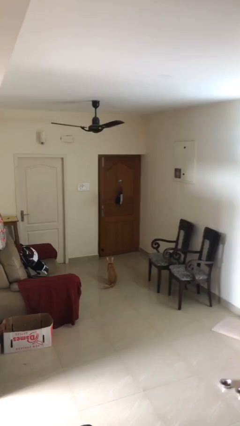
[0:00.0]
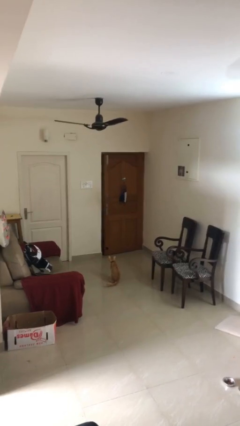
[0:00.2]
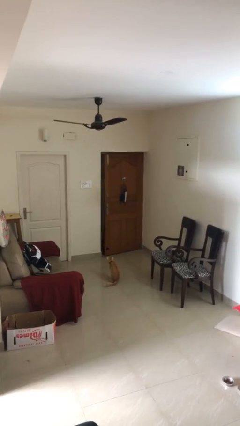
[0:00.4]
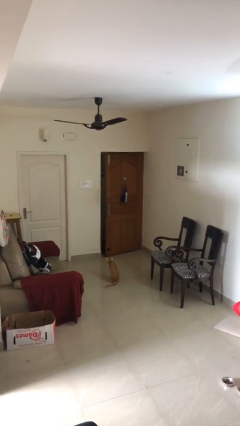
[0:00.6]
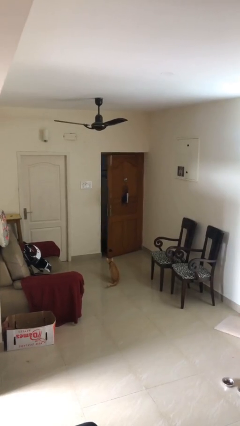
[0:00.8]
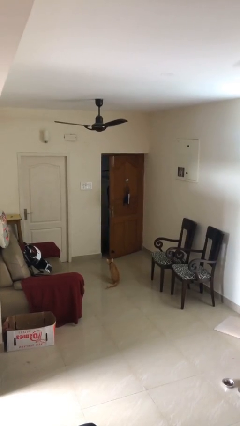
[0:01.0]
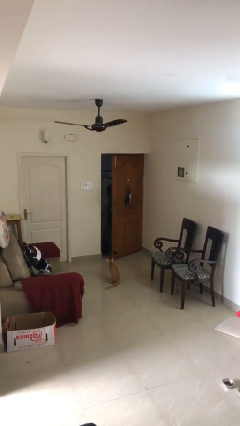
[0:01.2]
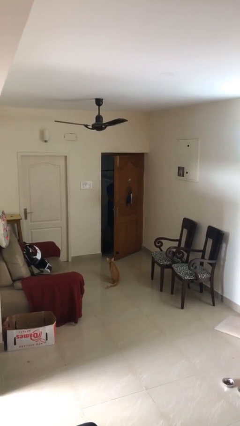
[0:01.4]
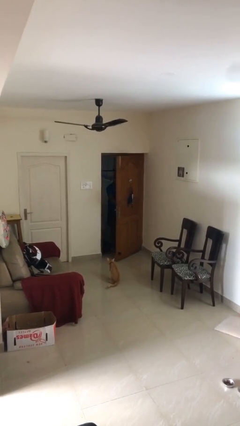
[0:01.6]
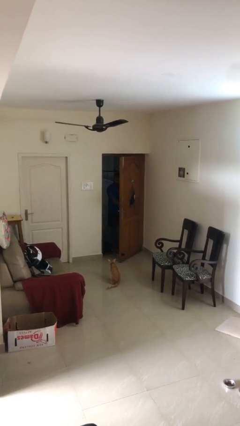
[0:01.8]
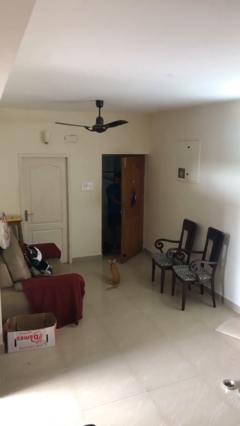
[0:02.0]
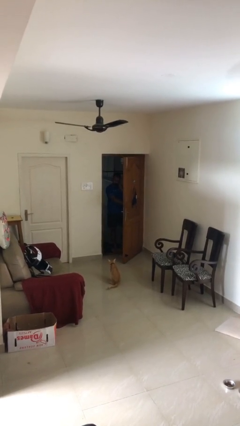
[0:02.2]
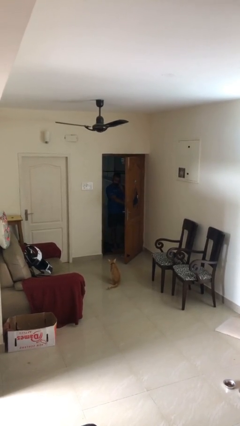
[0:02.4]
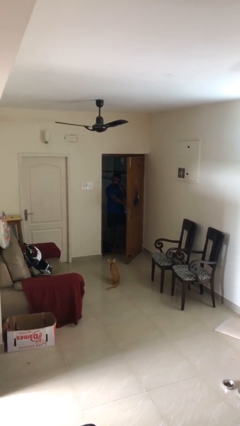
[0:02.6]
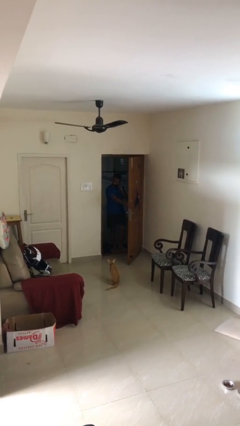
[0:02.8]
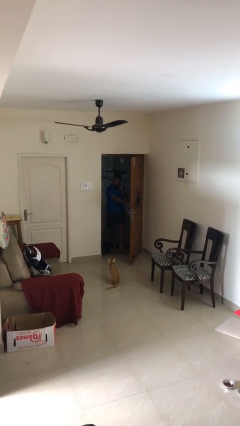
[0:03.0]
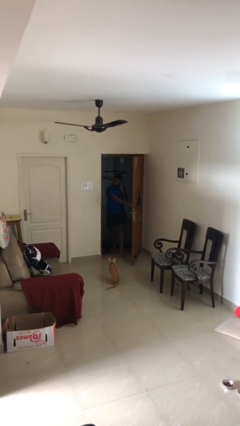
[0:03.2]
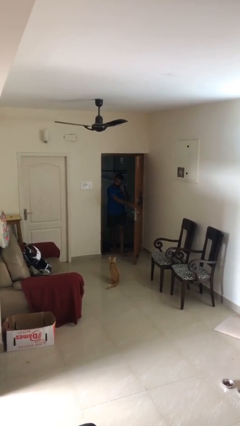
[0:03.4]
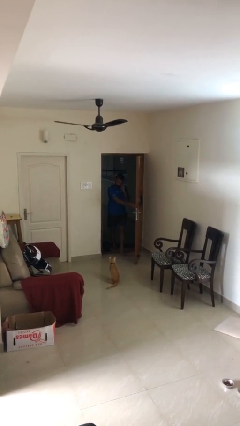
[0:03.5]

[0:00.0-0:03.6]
person opens facility door

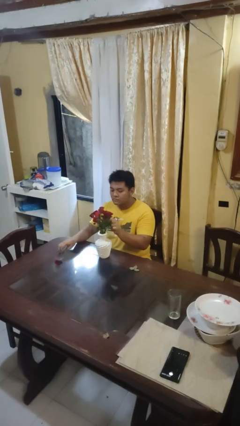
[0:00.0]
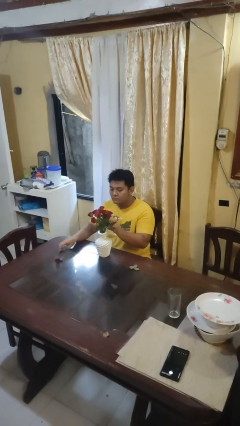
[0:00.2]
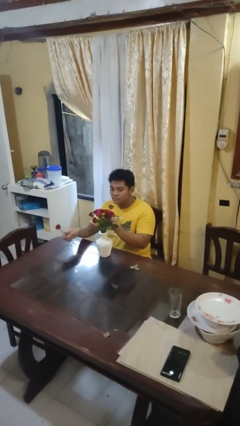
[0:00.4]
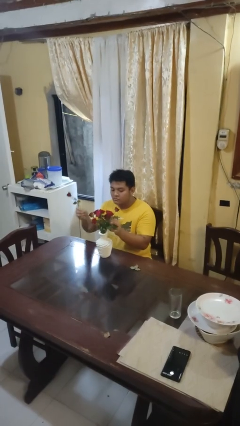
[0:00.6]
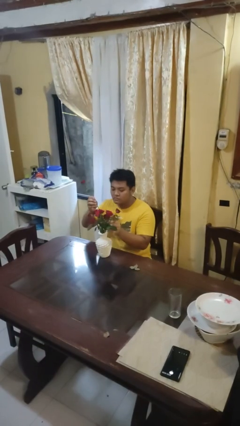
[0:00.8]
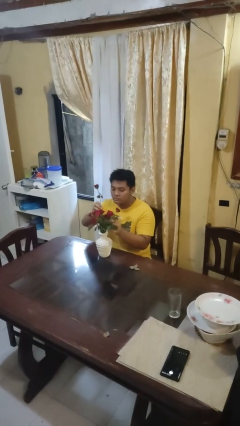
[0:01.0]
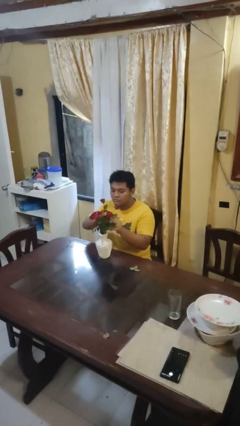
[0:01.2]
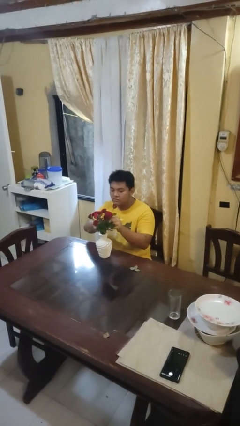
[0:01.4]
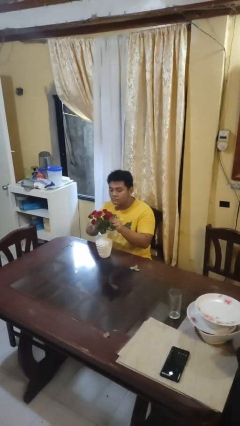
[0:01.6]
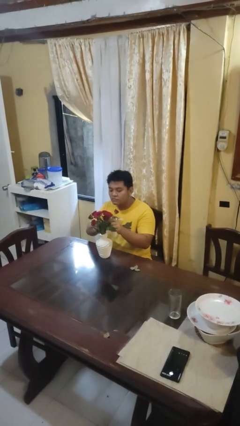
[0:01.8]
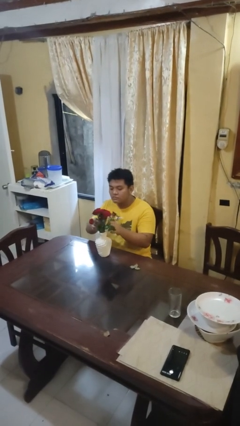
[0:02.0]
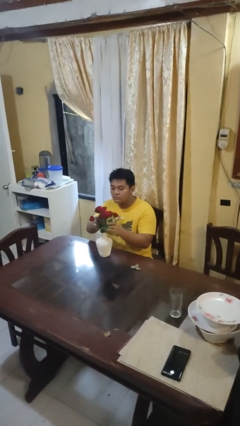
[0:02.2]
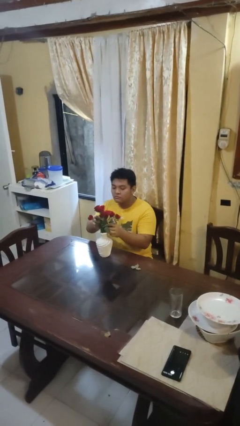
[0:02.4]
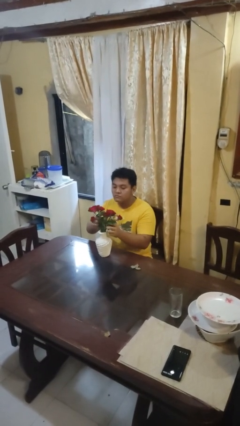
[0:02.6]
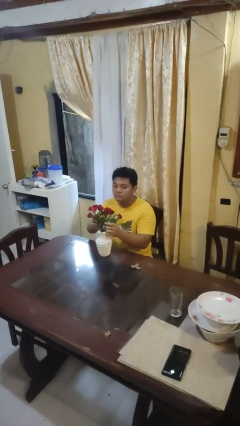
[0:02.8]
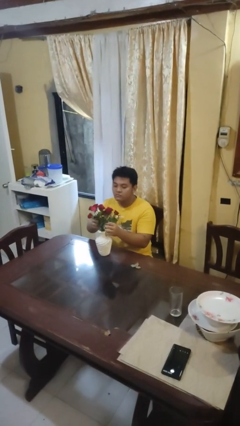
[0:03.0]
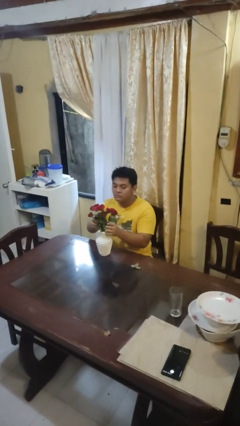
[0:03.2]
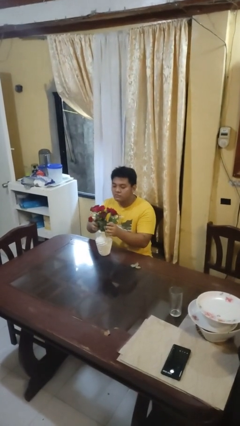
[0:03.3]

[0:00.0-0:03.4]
person arranges flowers in vase

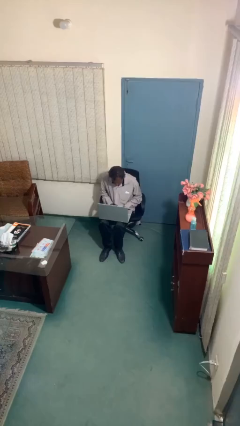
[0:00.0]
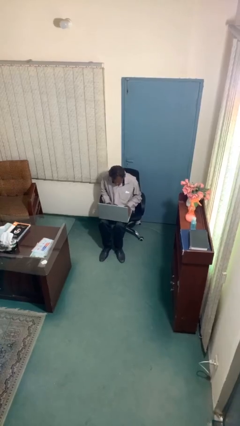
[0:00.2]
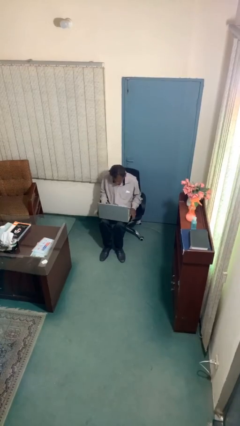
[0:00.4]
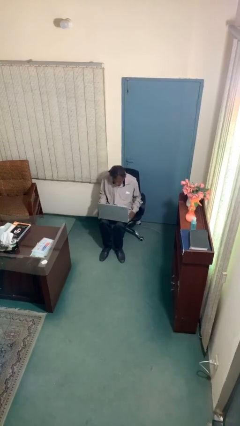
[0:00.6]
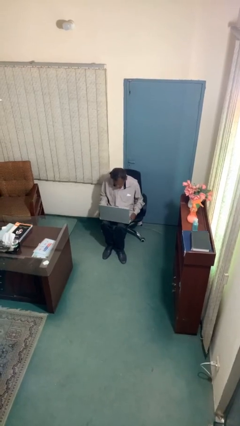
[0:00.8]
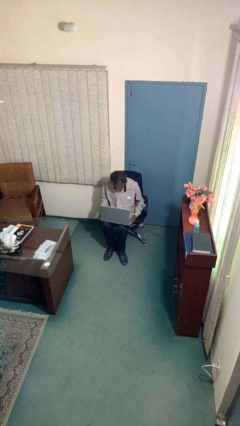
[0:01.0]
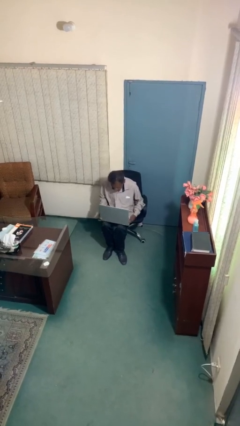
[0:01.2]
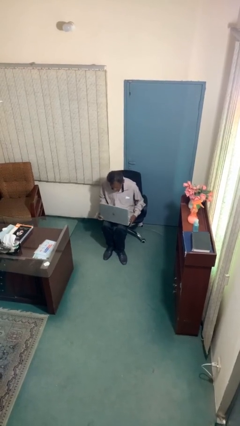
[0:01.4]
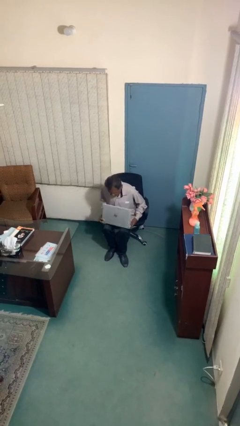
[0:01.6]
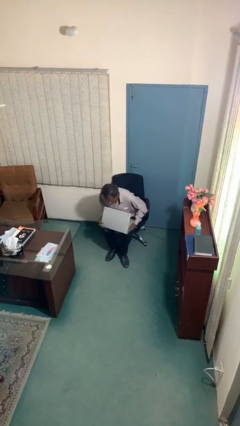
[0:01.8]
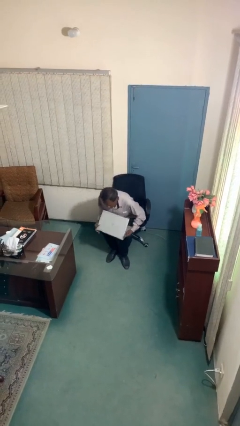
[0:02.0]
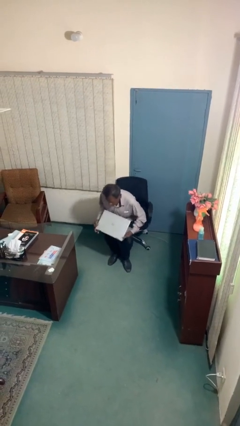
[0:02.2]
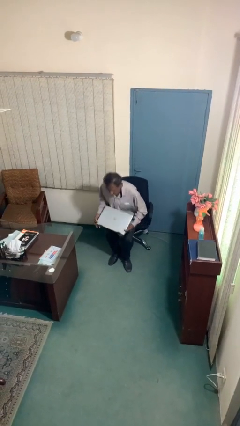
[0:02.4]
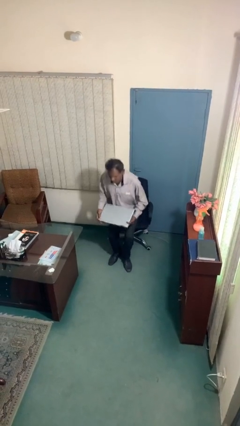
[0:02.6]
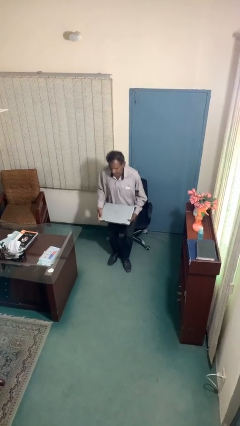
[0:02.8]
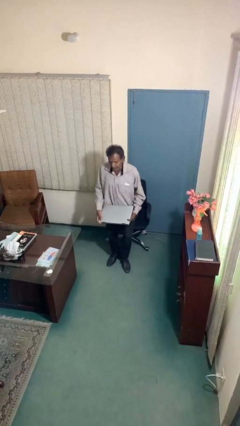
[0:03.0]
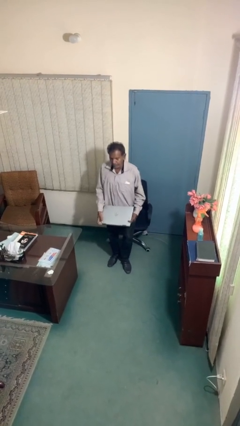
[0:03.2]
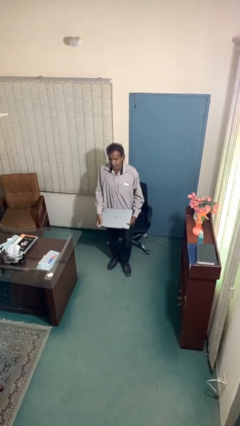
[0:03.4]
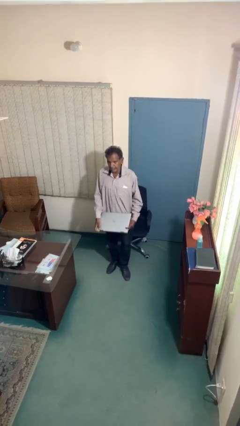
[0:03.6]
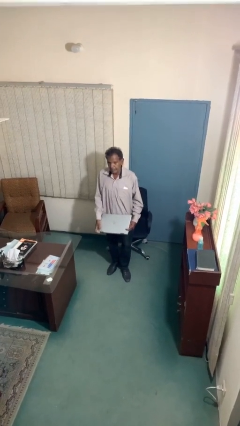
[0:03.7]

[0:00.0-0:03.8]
person stands up

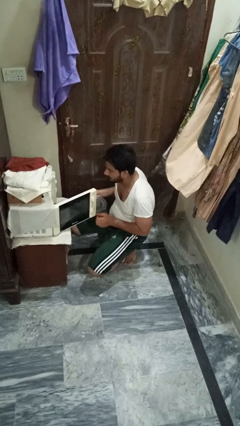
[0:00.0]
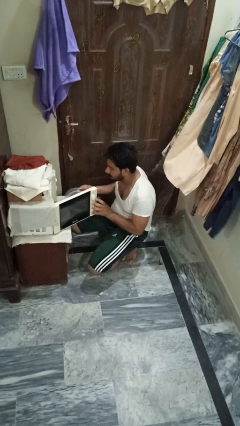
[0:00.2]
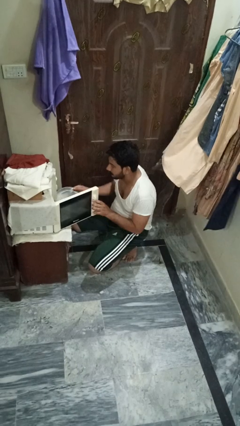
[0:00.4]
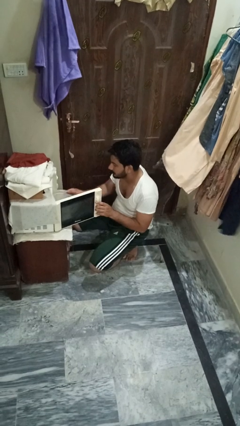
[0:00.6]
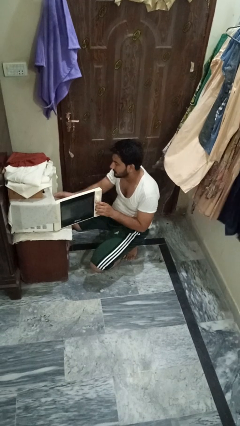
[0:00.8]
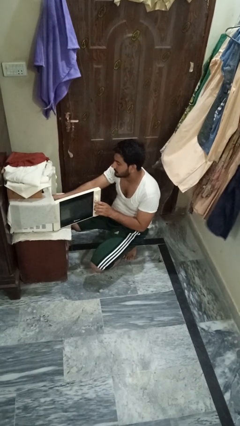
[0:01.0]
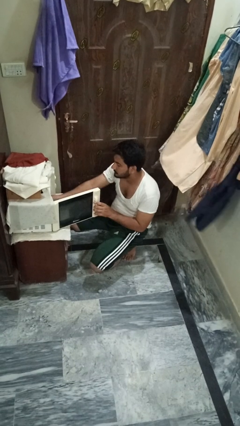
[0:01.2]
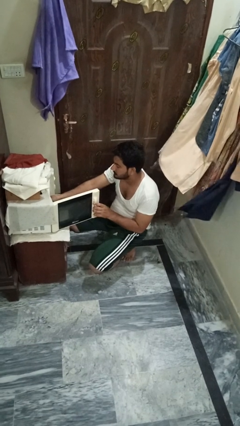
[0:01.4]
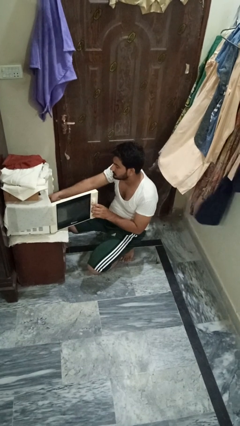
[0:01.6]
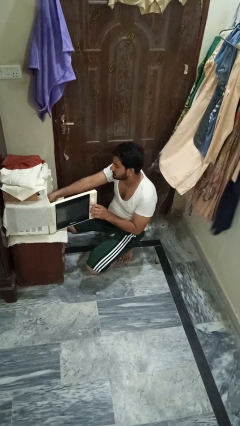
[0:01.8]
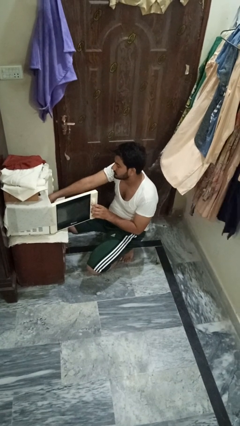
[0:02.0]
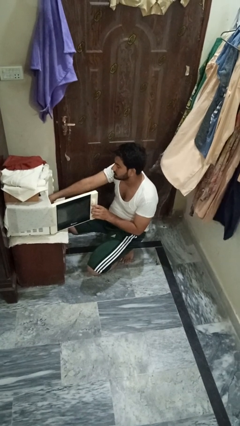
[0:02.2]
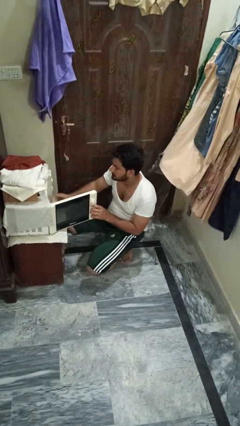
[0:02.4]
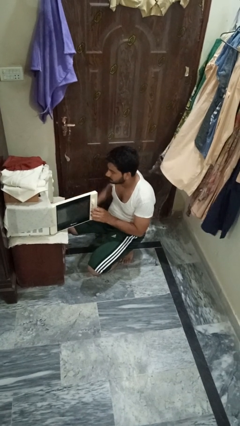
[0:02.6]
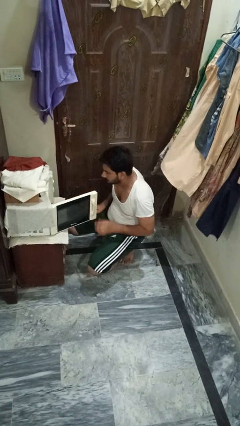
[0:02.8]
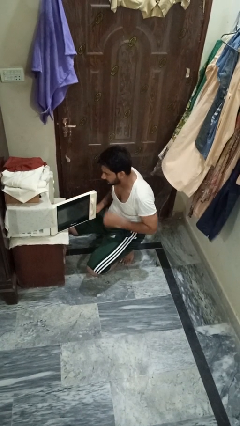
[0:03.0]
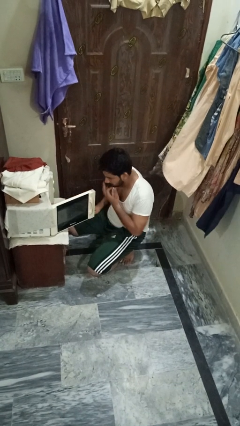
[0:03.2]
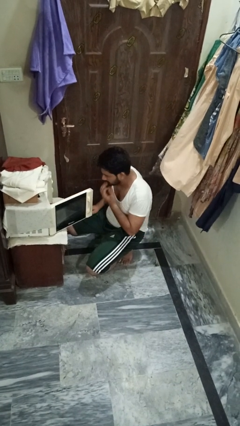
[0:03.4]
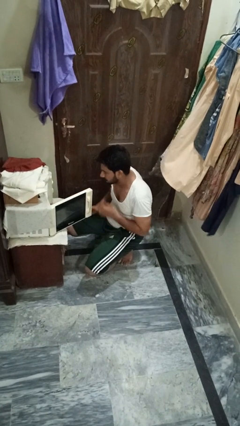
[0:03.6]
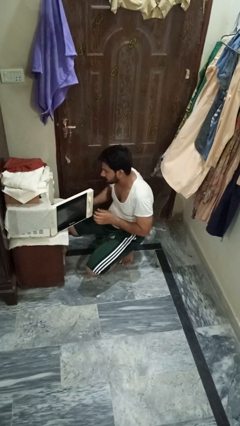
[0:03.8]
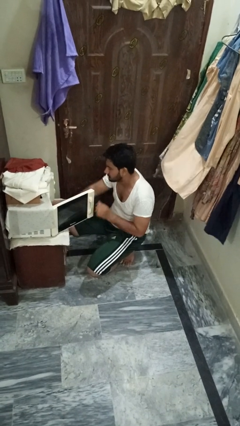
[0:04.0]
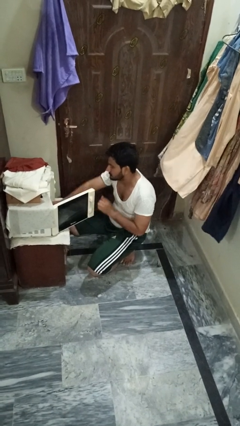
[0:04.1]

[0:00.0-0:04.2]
person puts object into oven

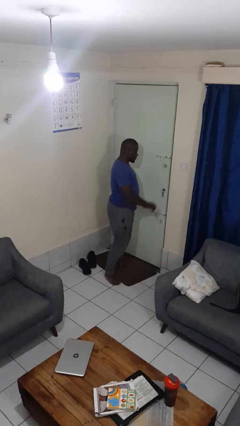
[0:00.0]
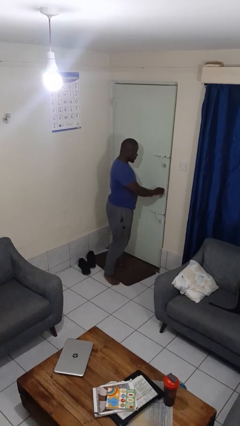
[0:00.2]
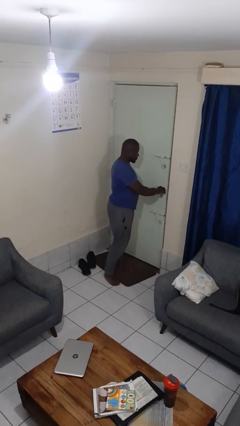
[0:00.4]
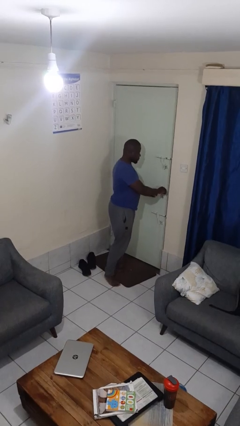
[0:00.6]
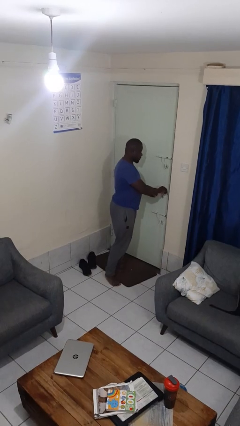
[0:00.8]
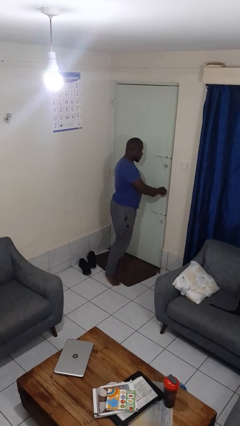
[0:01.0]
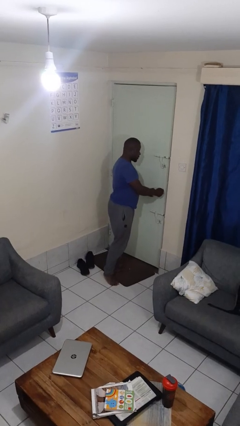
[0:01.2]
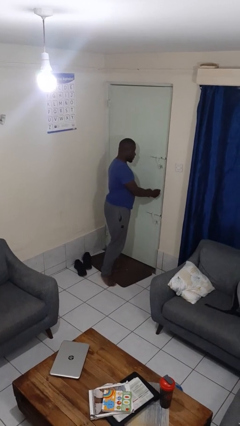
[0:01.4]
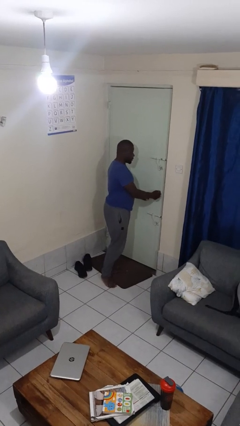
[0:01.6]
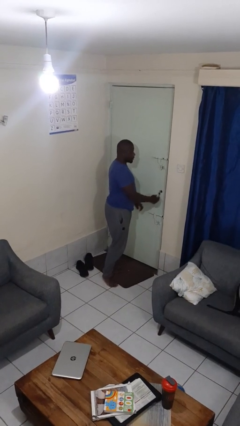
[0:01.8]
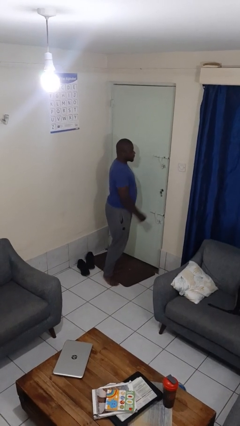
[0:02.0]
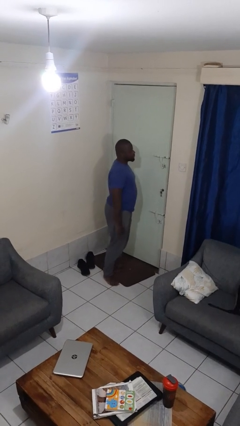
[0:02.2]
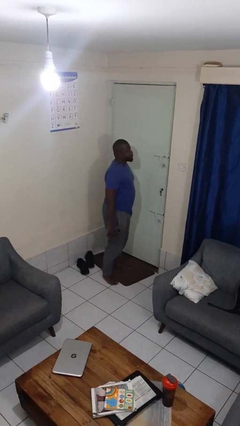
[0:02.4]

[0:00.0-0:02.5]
person locks door with keys

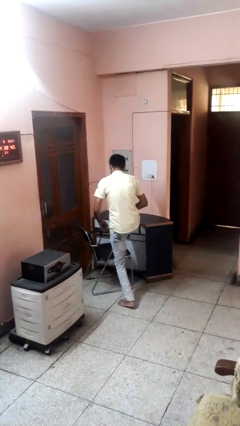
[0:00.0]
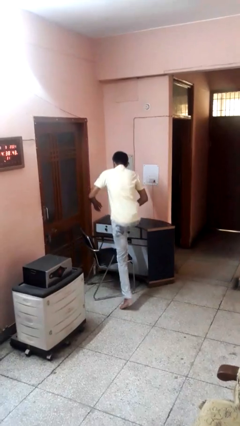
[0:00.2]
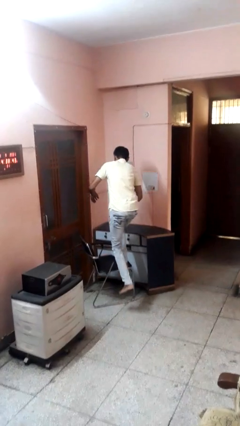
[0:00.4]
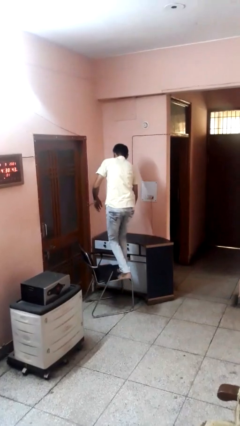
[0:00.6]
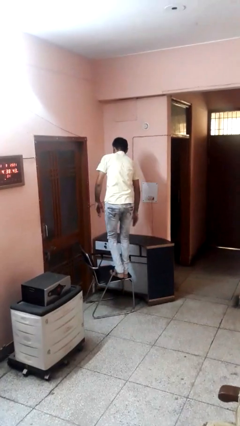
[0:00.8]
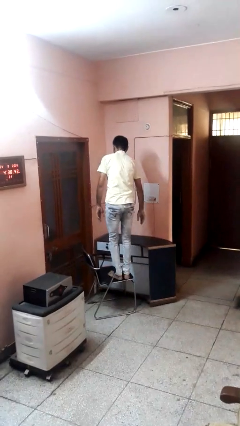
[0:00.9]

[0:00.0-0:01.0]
person climbs on chair
